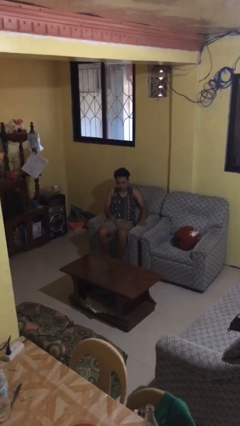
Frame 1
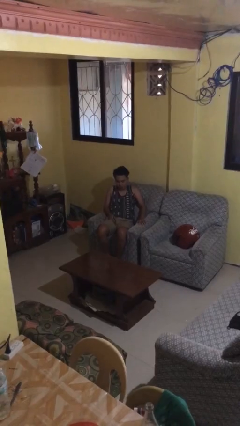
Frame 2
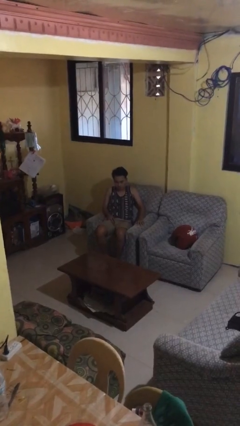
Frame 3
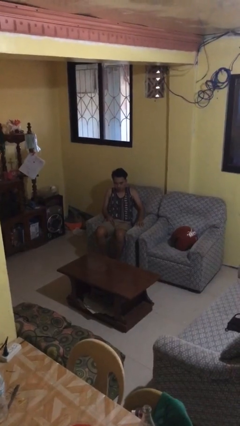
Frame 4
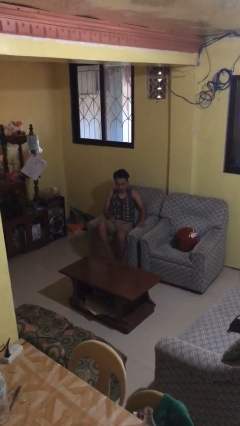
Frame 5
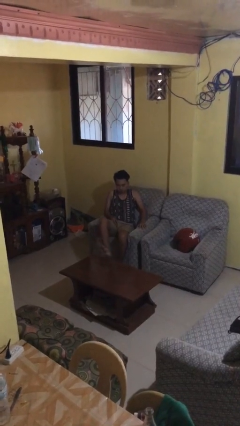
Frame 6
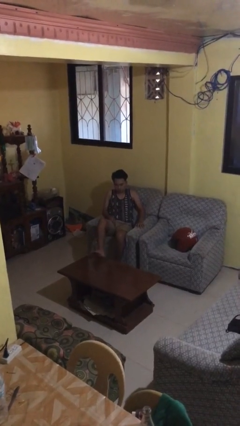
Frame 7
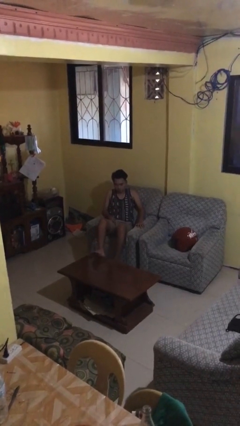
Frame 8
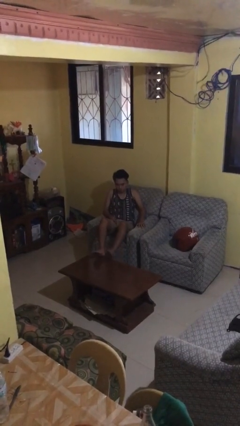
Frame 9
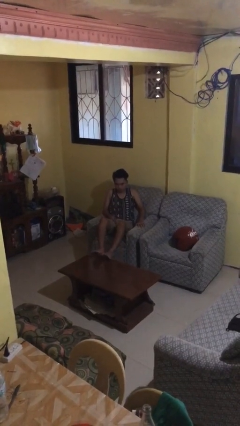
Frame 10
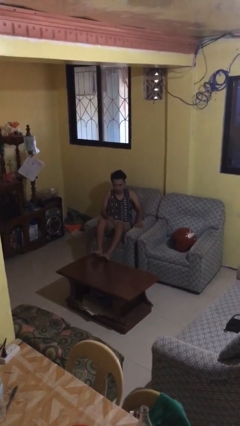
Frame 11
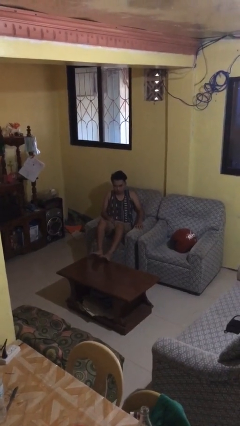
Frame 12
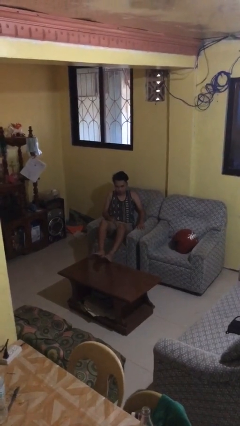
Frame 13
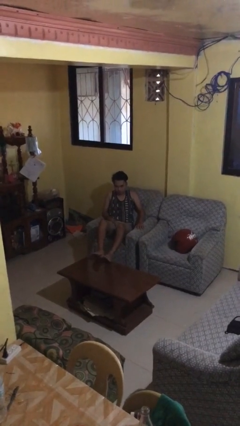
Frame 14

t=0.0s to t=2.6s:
person puts feet up

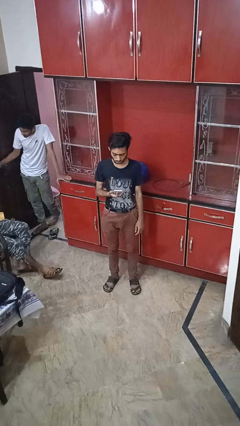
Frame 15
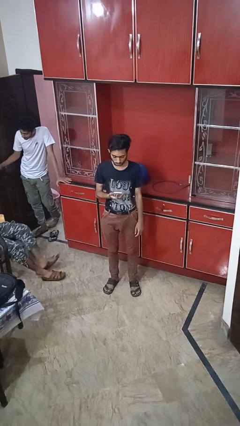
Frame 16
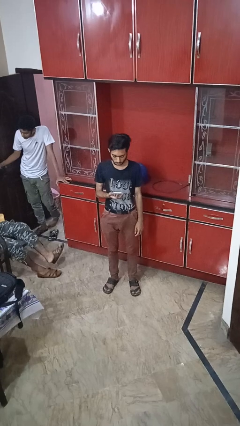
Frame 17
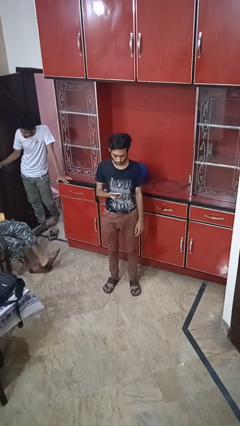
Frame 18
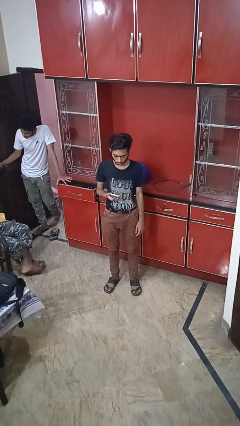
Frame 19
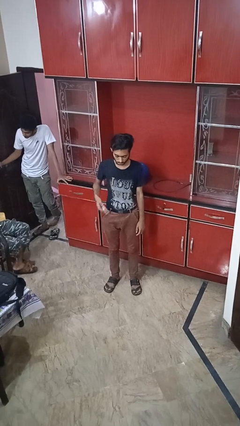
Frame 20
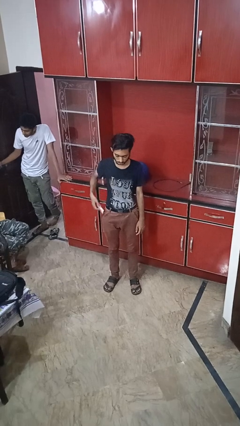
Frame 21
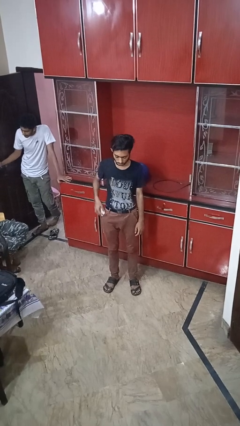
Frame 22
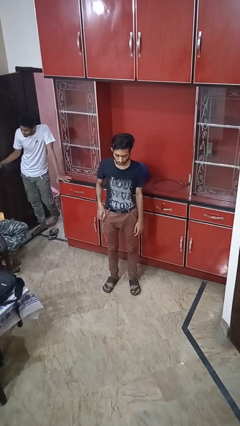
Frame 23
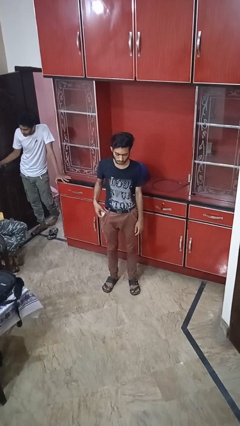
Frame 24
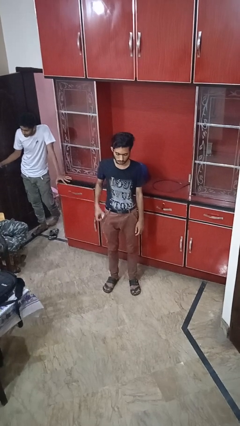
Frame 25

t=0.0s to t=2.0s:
person puts phone into pocket

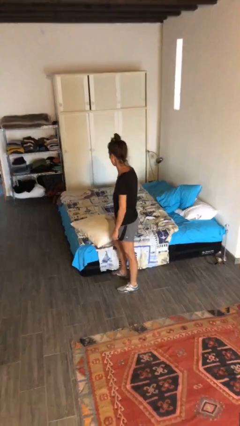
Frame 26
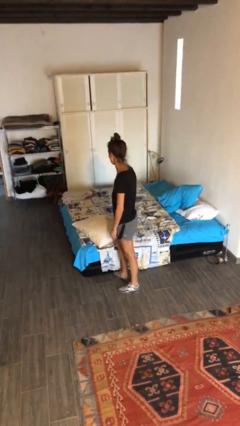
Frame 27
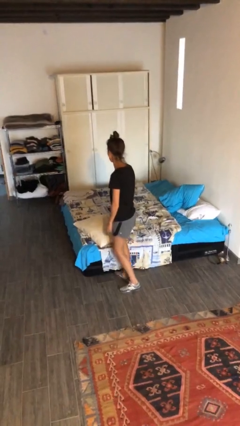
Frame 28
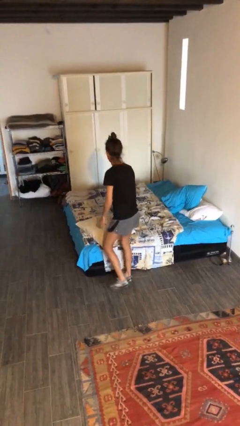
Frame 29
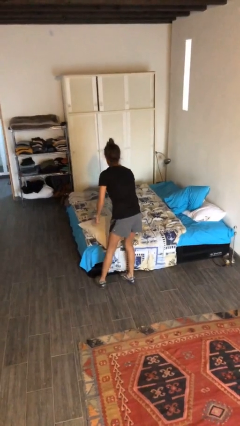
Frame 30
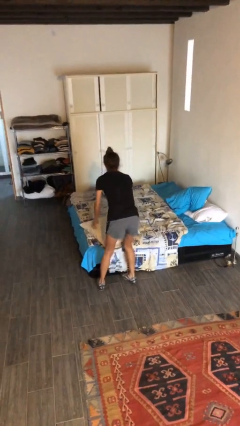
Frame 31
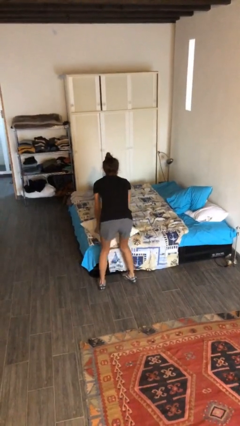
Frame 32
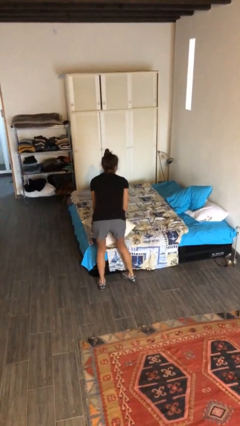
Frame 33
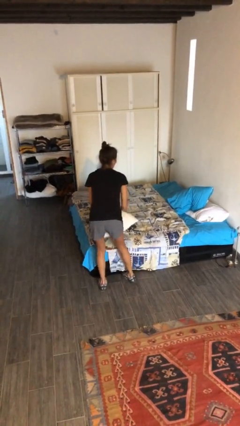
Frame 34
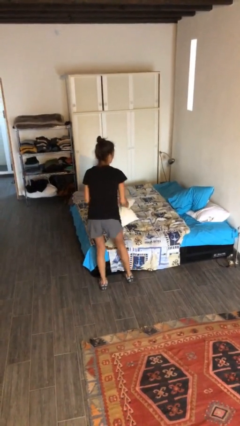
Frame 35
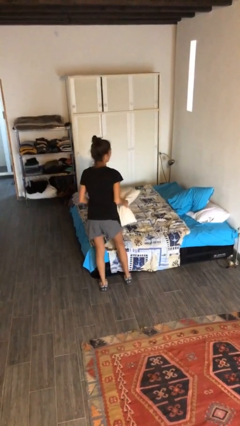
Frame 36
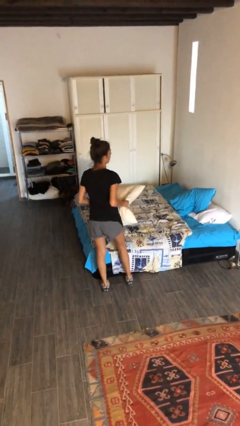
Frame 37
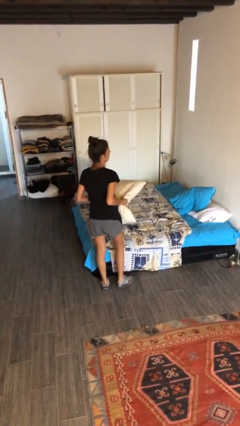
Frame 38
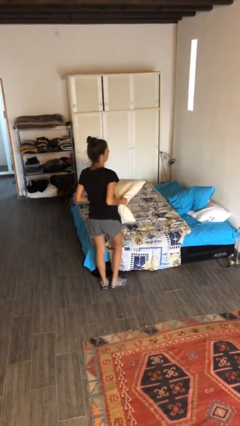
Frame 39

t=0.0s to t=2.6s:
person picks up object from bed

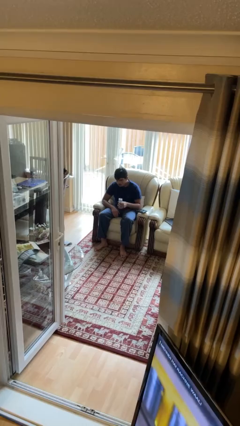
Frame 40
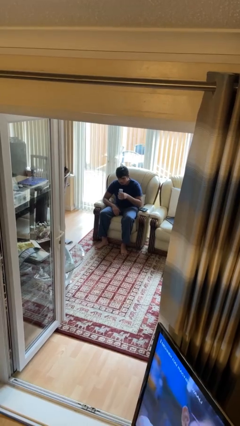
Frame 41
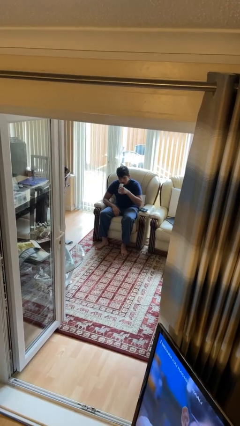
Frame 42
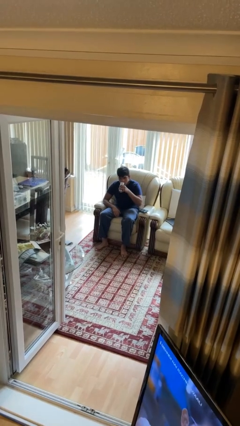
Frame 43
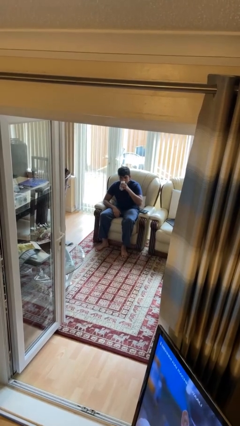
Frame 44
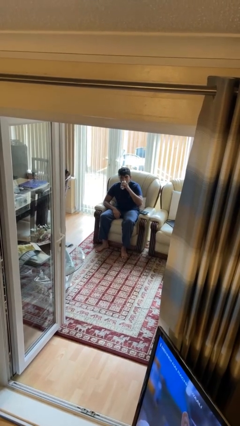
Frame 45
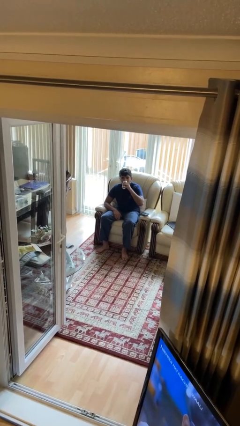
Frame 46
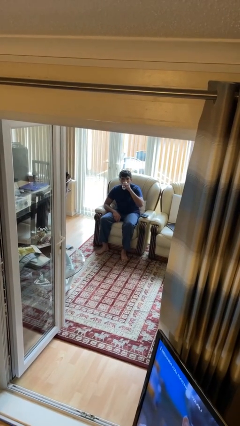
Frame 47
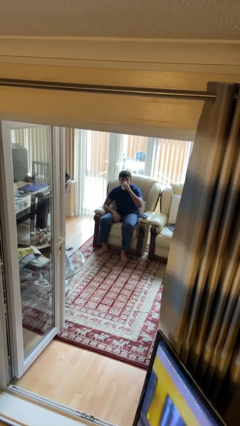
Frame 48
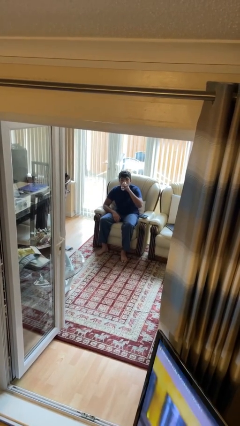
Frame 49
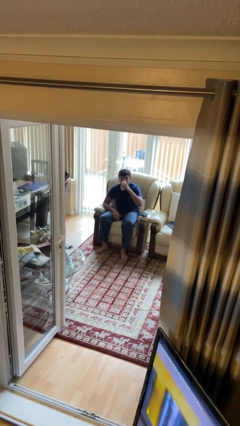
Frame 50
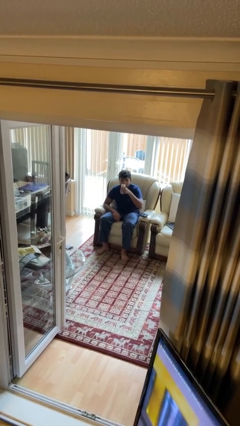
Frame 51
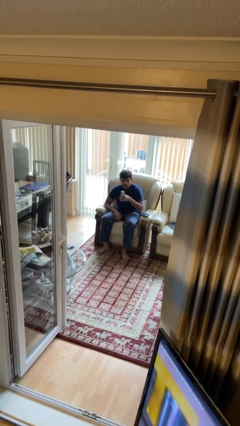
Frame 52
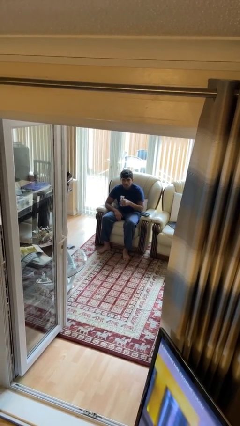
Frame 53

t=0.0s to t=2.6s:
person drinks from beverage can

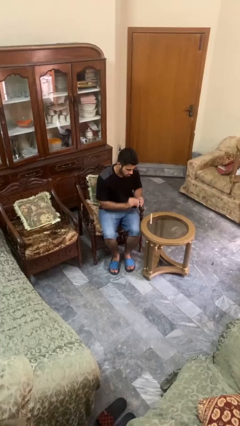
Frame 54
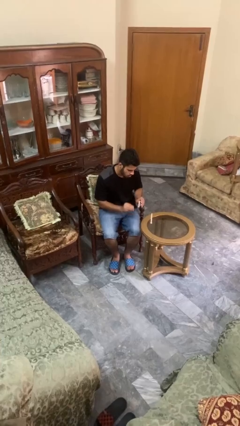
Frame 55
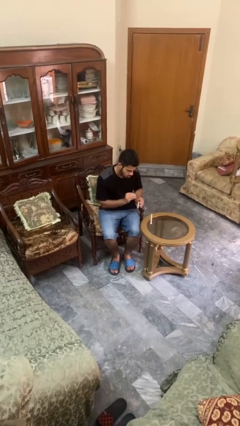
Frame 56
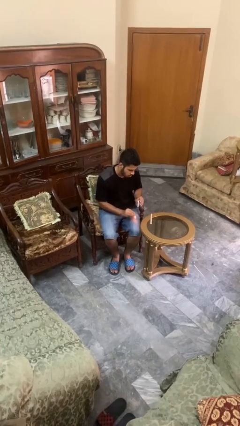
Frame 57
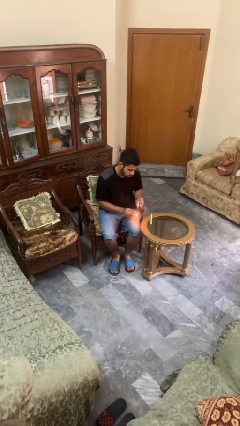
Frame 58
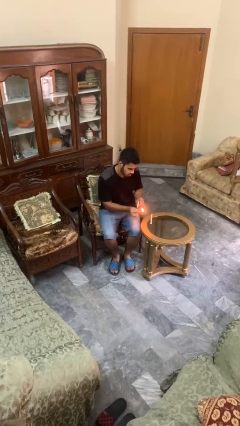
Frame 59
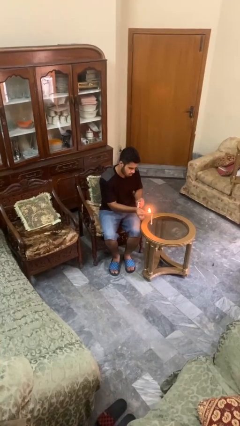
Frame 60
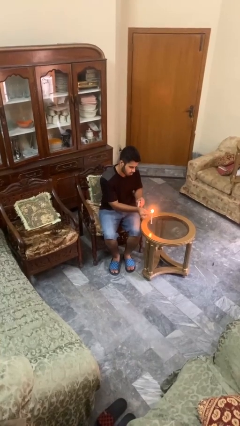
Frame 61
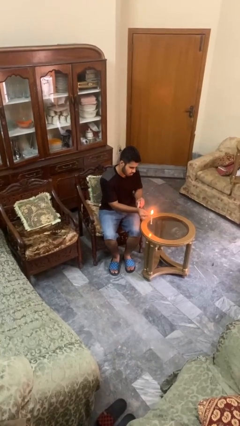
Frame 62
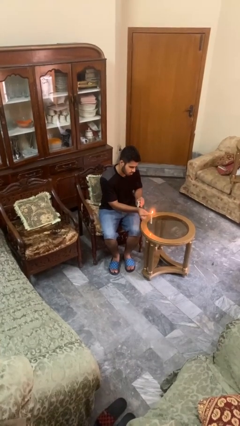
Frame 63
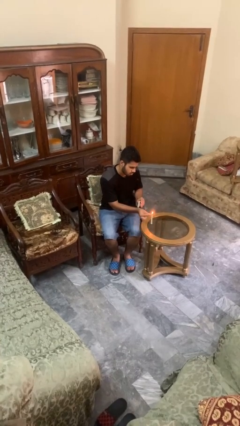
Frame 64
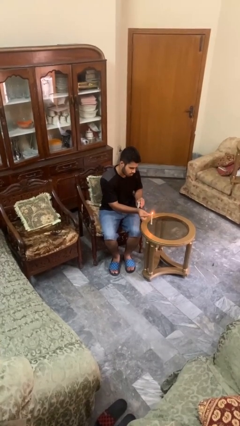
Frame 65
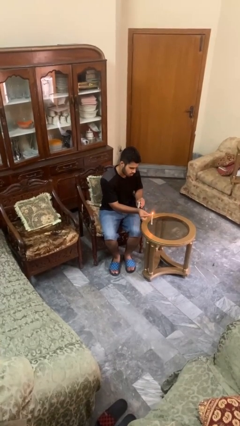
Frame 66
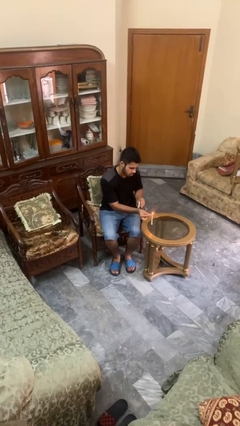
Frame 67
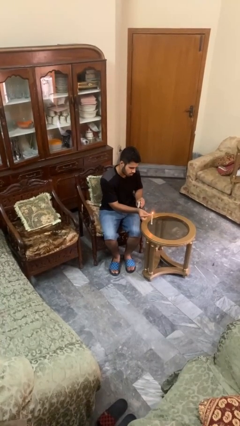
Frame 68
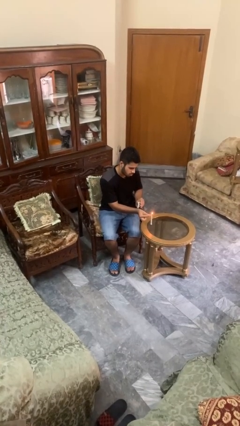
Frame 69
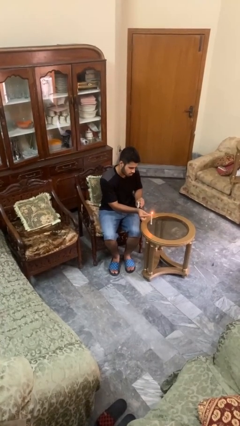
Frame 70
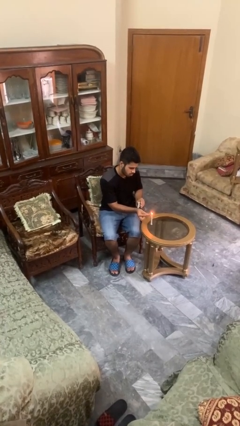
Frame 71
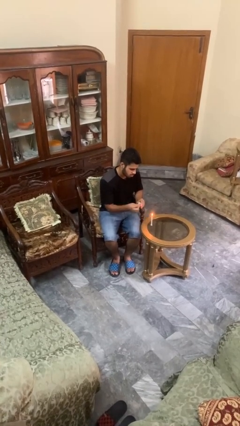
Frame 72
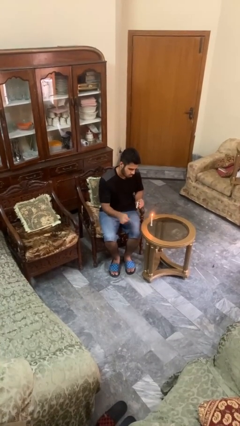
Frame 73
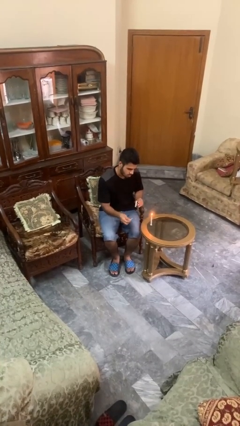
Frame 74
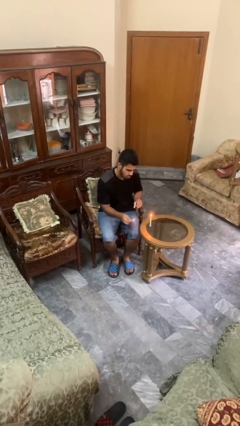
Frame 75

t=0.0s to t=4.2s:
person lights candle

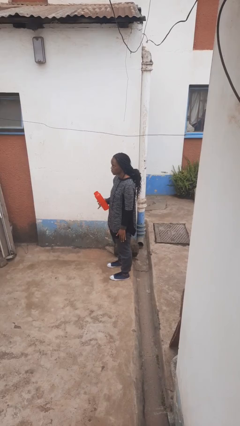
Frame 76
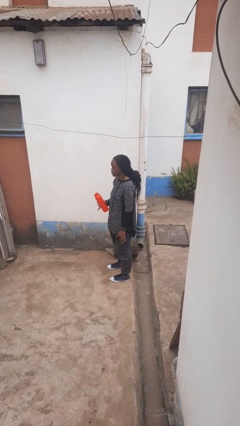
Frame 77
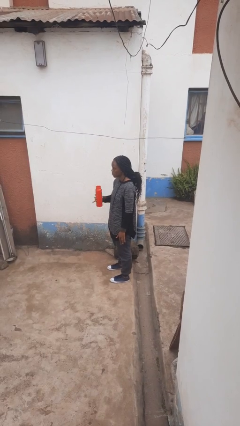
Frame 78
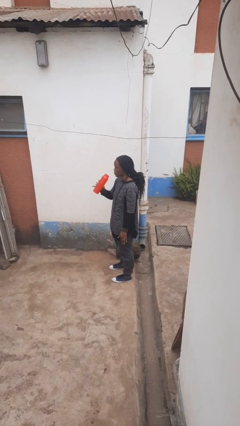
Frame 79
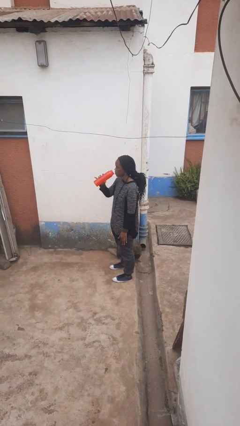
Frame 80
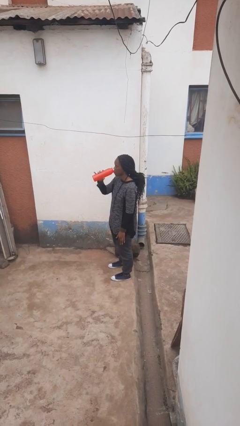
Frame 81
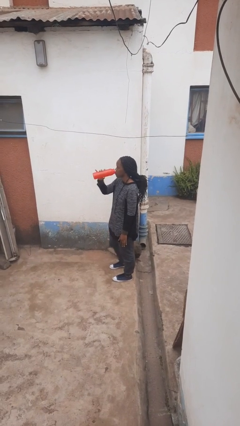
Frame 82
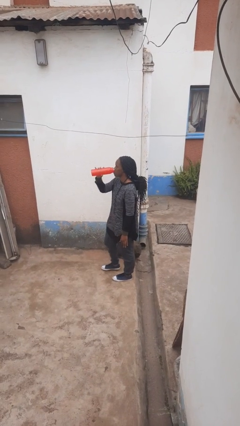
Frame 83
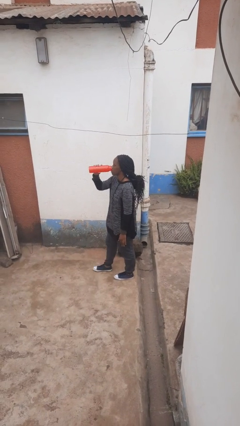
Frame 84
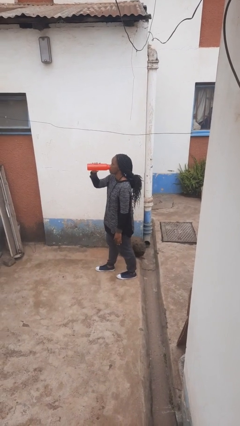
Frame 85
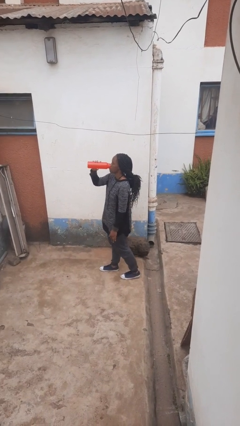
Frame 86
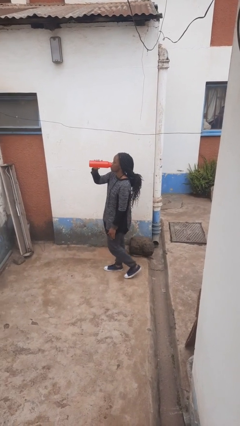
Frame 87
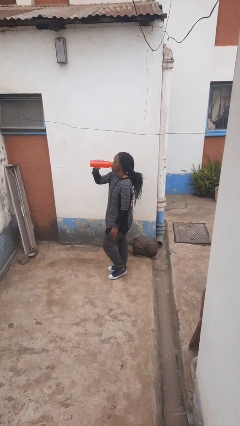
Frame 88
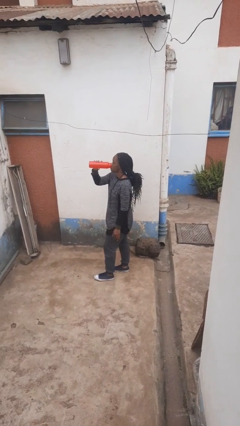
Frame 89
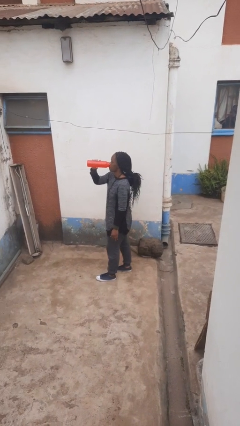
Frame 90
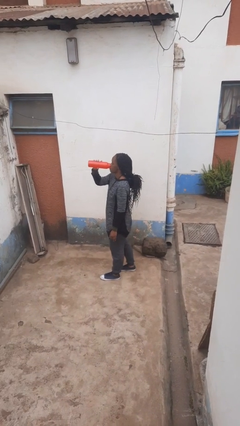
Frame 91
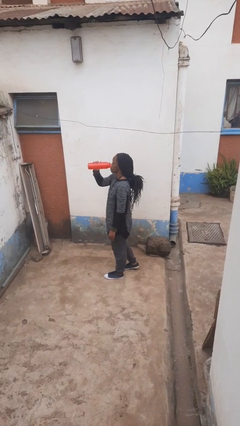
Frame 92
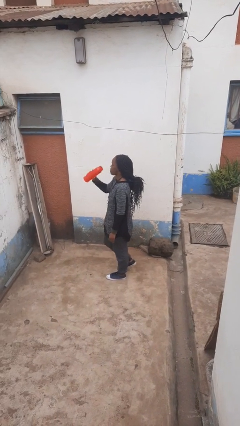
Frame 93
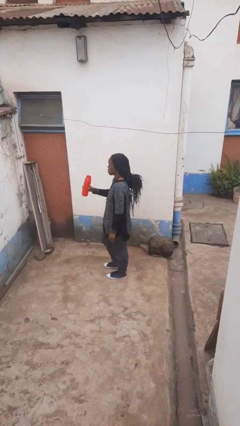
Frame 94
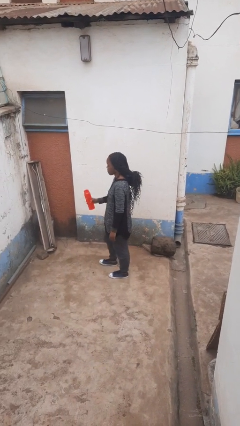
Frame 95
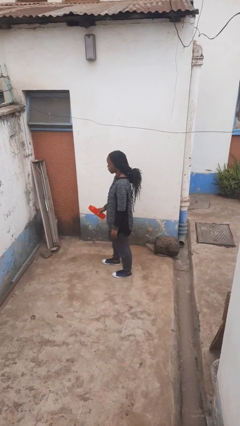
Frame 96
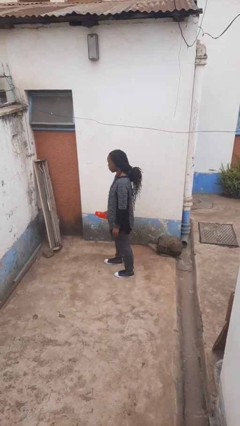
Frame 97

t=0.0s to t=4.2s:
person drinks from bottle
